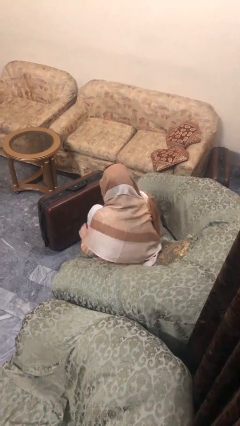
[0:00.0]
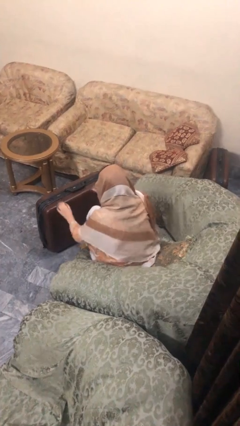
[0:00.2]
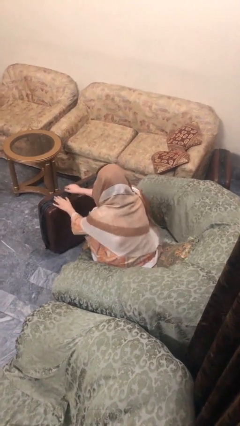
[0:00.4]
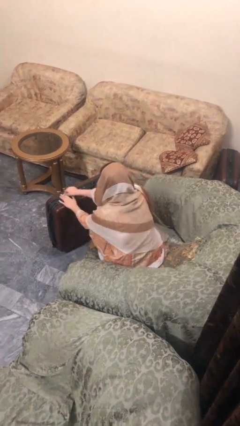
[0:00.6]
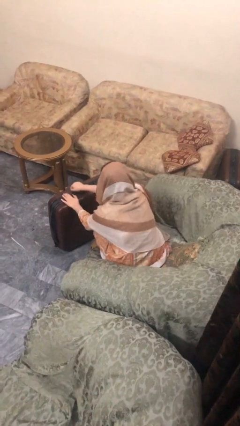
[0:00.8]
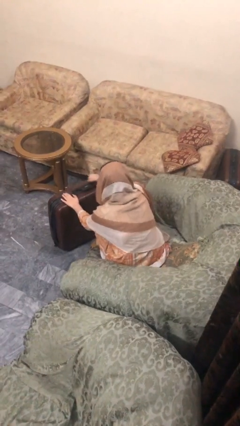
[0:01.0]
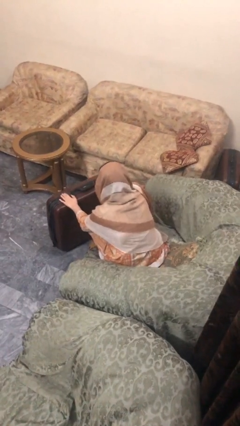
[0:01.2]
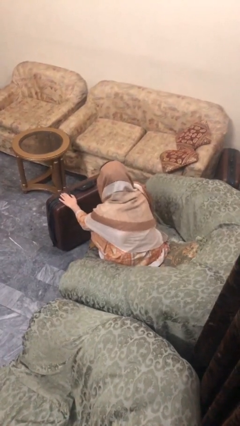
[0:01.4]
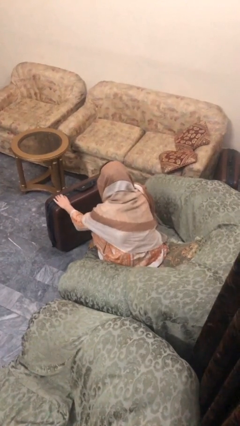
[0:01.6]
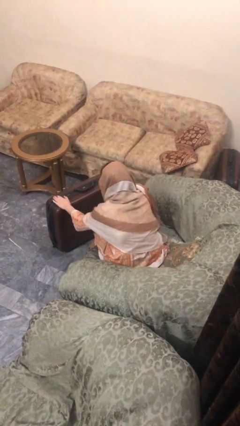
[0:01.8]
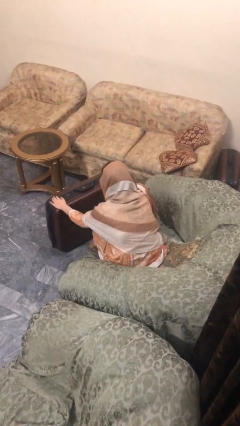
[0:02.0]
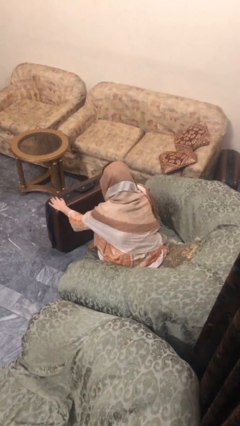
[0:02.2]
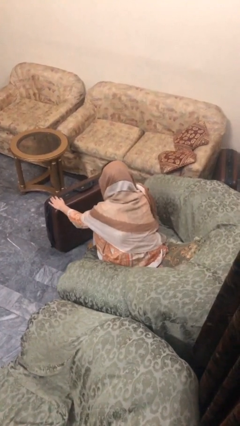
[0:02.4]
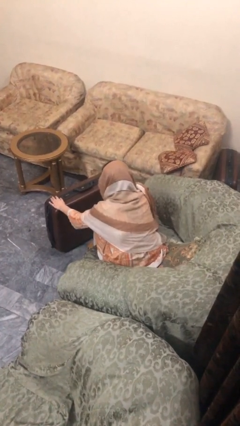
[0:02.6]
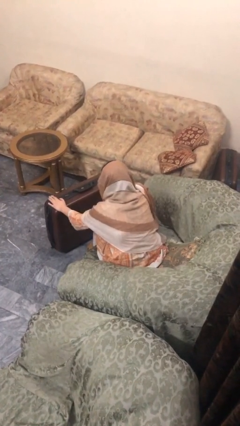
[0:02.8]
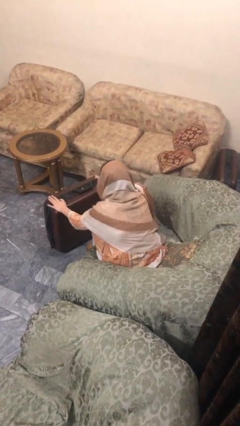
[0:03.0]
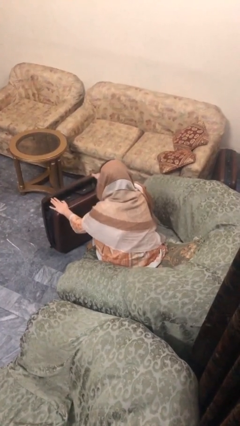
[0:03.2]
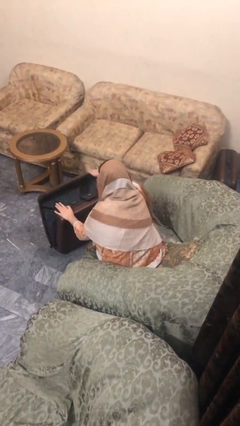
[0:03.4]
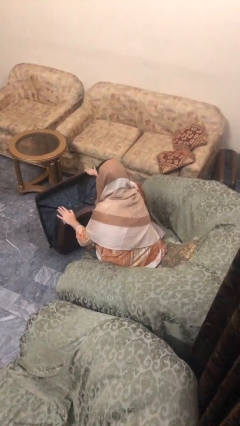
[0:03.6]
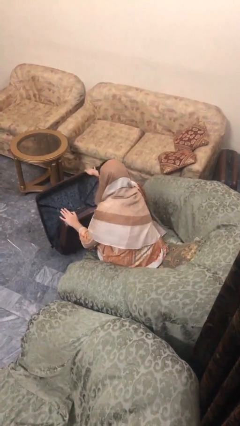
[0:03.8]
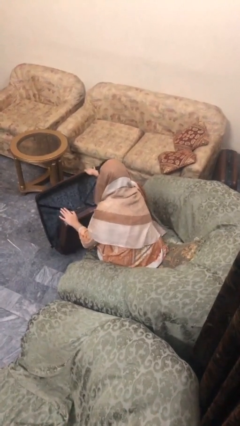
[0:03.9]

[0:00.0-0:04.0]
person opens suitcase

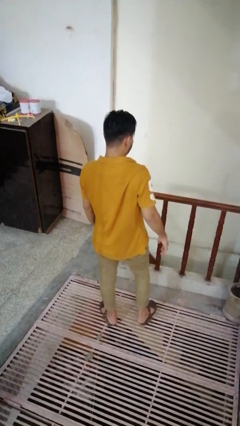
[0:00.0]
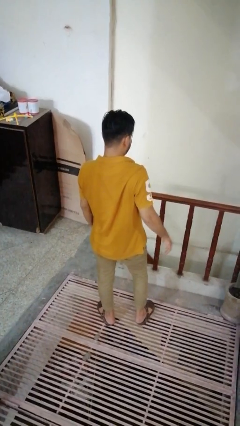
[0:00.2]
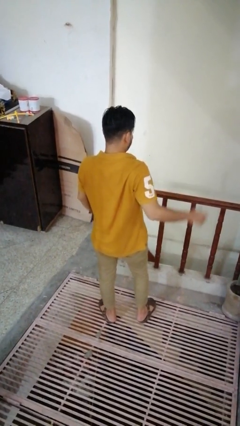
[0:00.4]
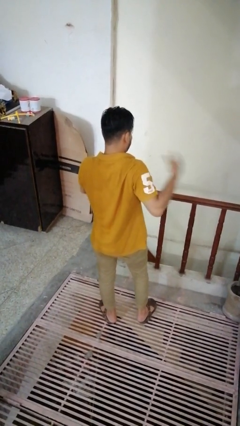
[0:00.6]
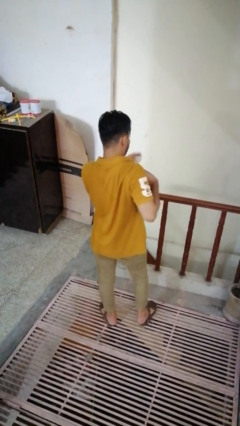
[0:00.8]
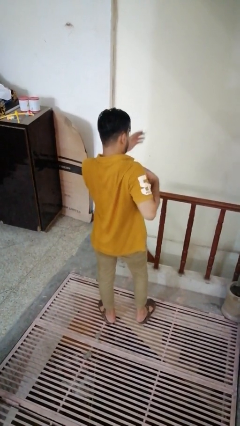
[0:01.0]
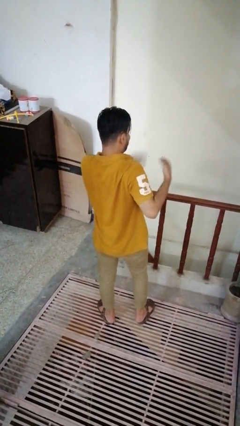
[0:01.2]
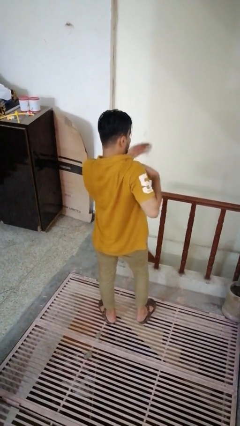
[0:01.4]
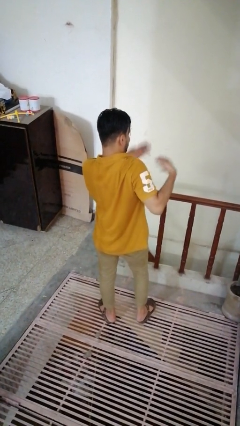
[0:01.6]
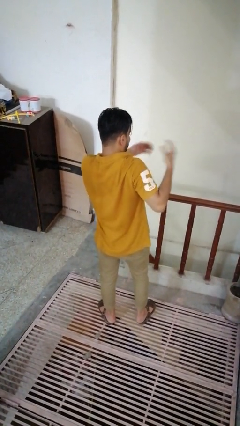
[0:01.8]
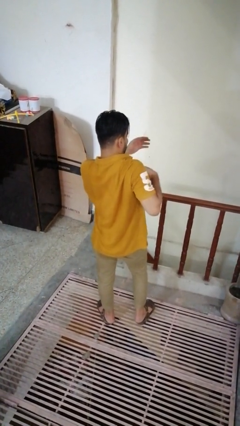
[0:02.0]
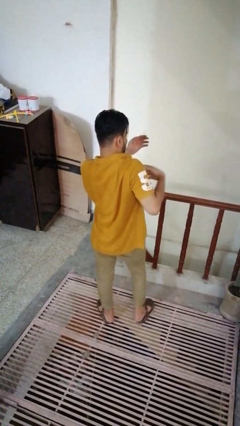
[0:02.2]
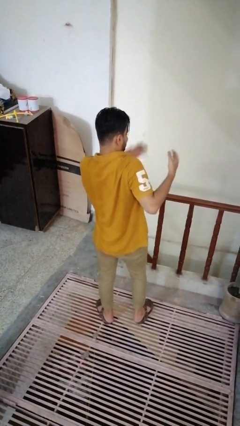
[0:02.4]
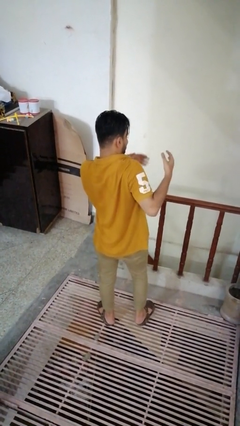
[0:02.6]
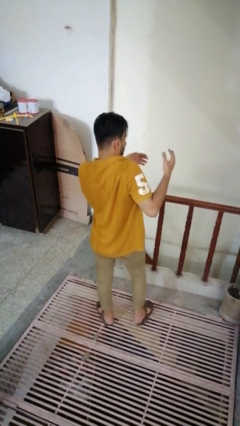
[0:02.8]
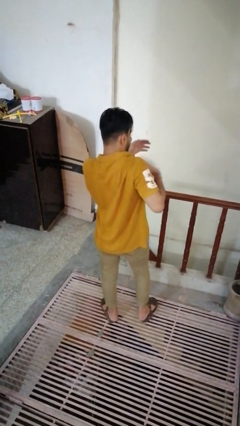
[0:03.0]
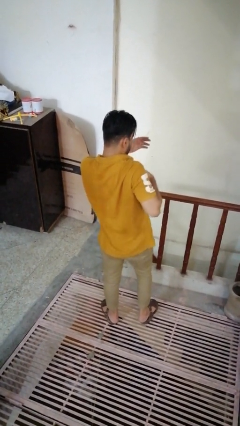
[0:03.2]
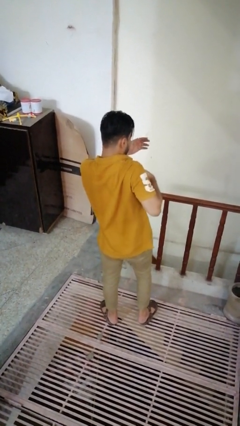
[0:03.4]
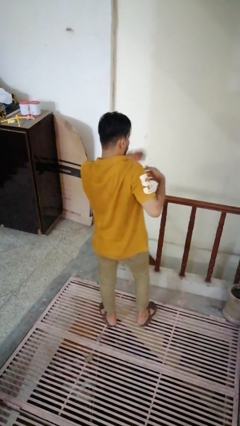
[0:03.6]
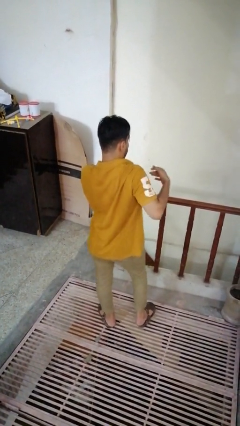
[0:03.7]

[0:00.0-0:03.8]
person drums on chest

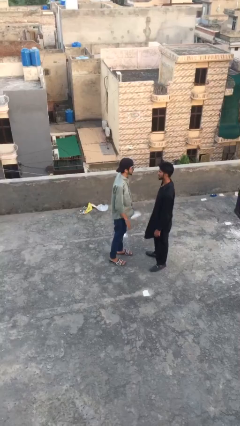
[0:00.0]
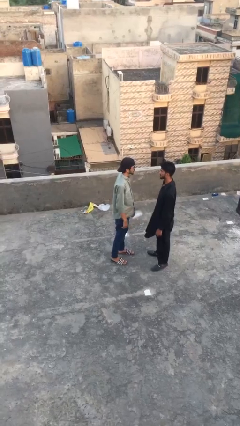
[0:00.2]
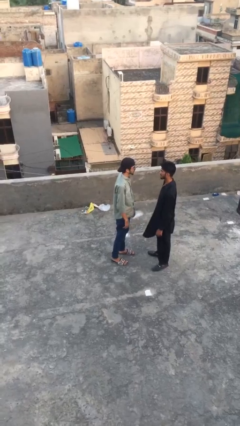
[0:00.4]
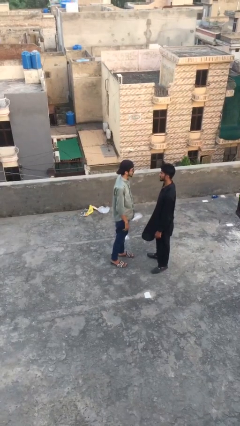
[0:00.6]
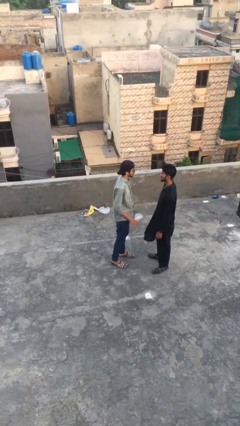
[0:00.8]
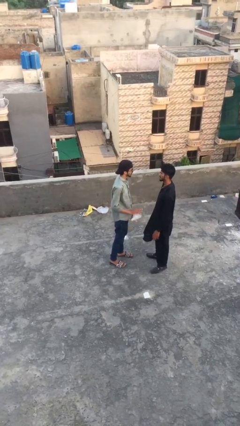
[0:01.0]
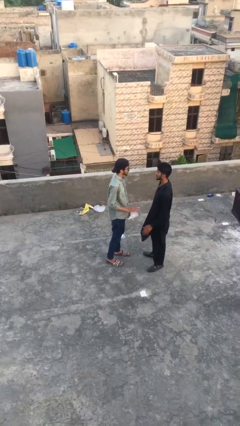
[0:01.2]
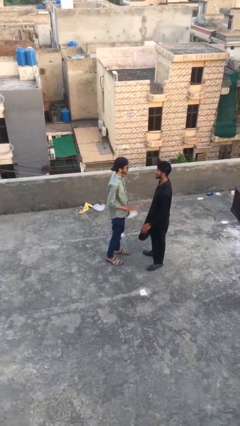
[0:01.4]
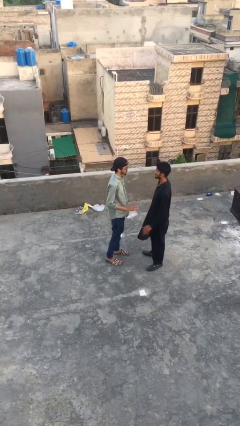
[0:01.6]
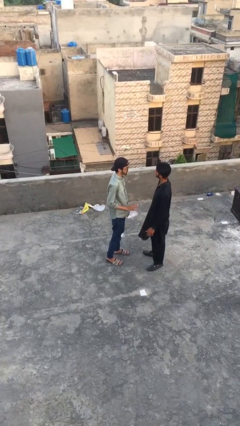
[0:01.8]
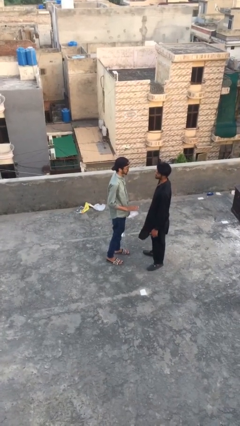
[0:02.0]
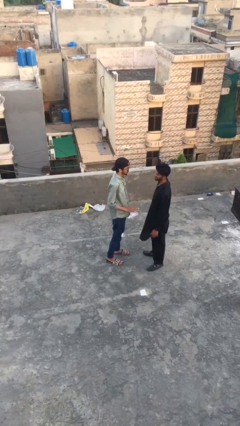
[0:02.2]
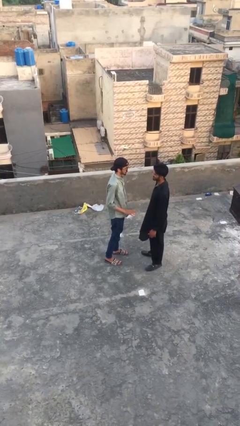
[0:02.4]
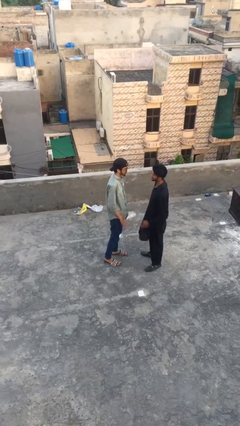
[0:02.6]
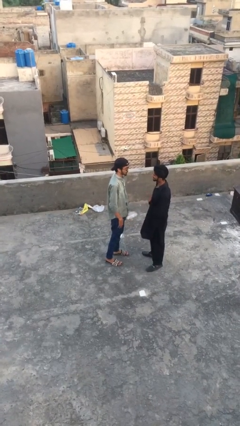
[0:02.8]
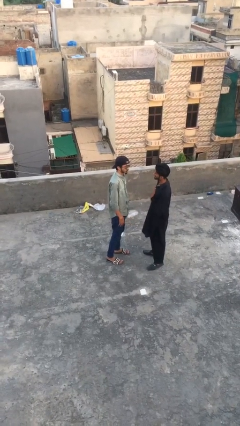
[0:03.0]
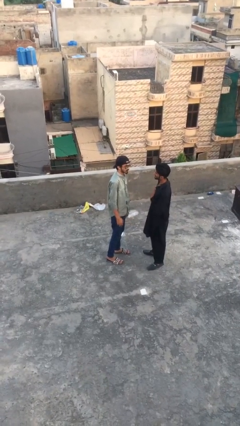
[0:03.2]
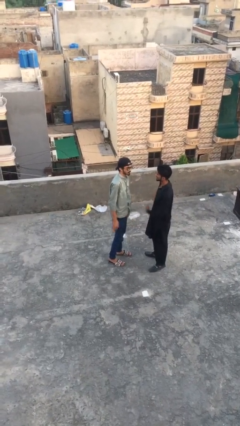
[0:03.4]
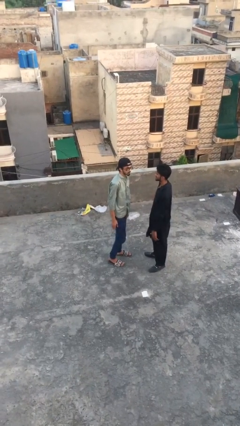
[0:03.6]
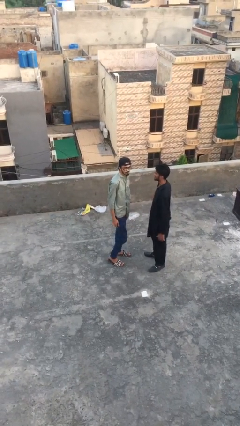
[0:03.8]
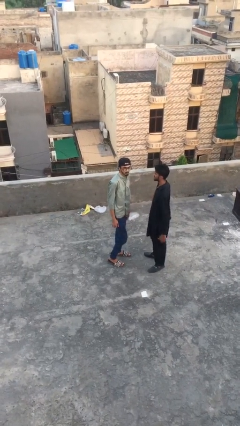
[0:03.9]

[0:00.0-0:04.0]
person talks to person

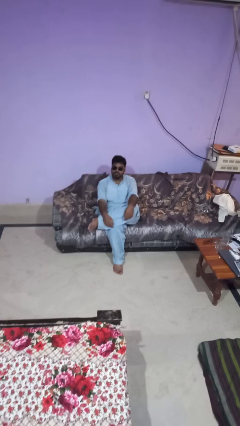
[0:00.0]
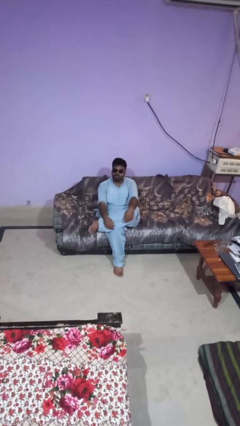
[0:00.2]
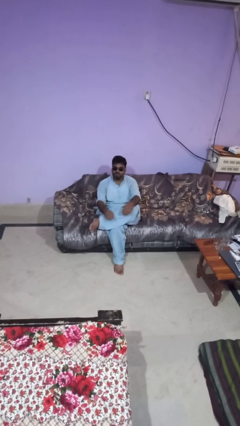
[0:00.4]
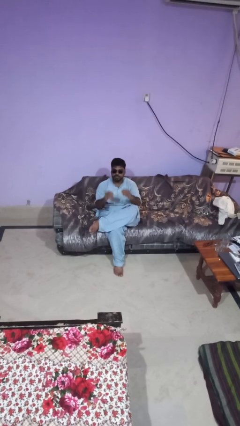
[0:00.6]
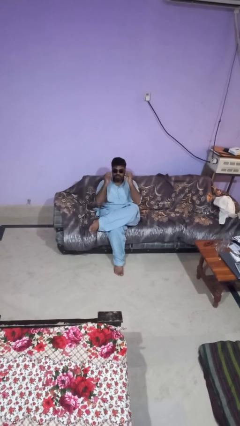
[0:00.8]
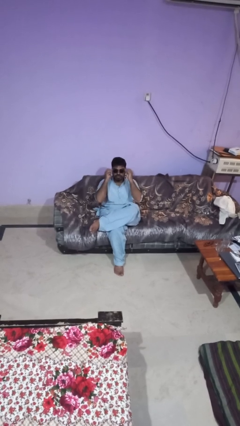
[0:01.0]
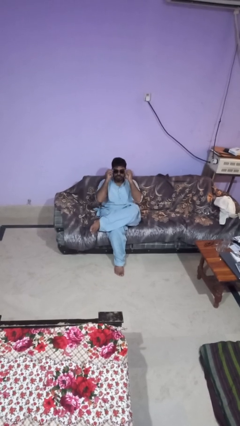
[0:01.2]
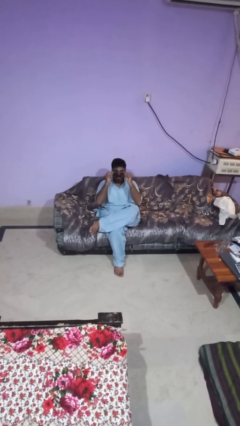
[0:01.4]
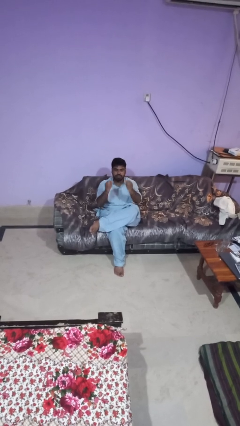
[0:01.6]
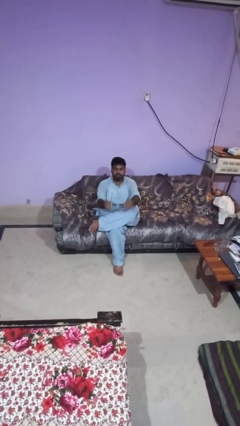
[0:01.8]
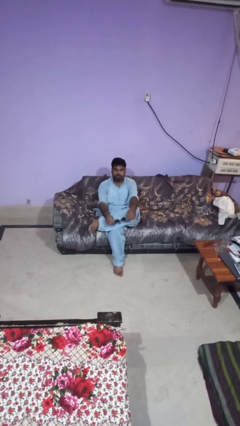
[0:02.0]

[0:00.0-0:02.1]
person takes off sunglasses

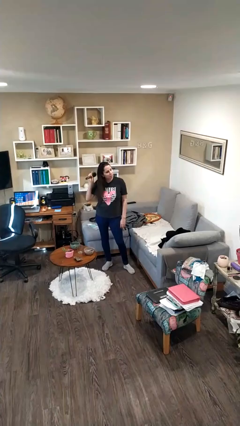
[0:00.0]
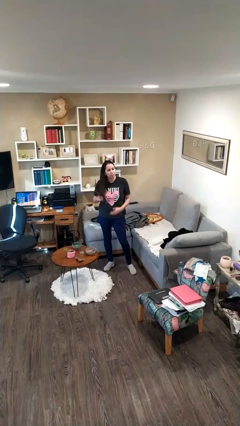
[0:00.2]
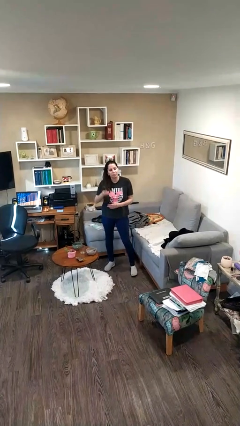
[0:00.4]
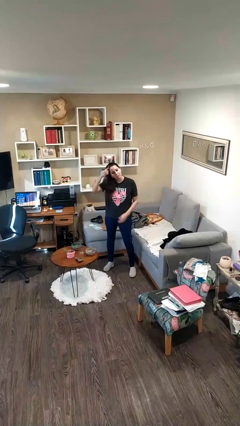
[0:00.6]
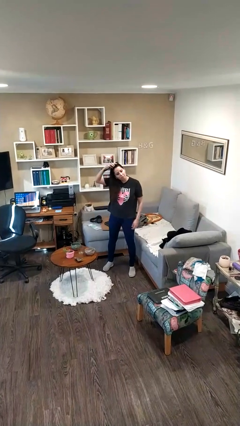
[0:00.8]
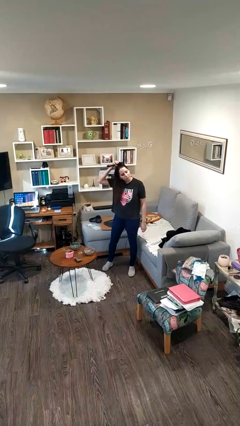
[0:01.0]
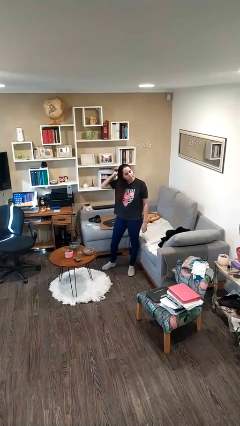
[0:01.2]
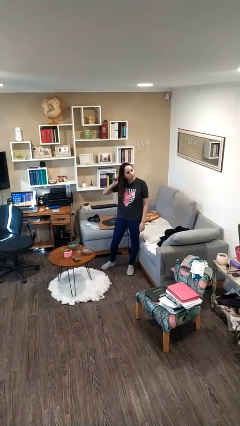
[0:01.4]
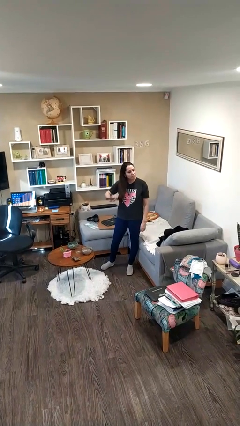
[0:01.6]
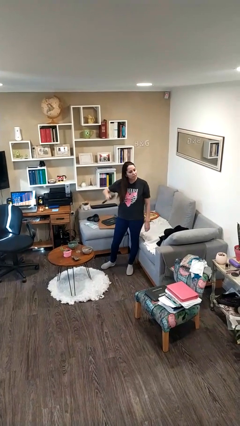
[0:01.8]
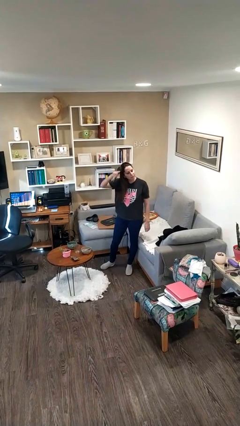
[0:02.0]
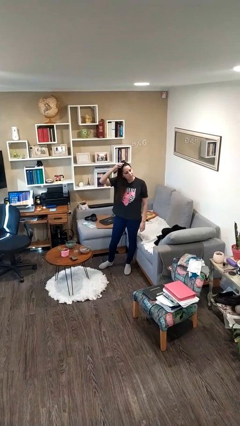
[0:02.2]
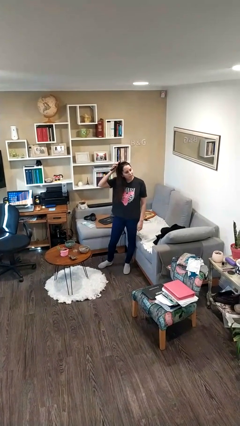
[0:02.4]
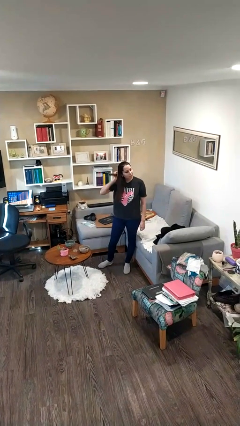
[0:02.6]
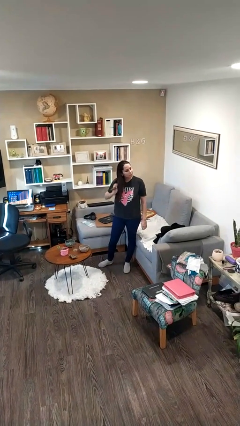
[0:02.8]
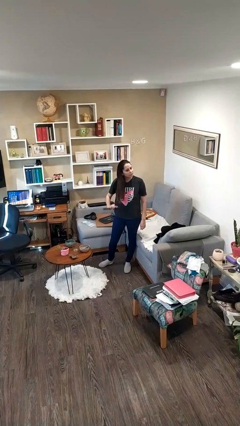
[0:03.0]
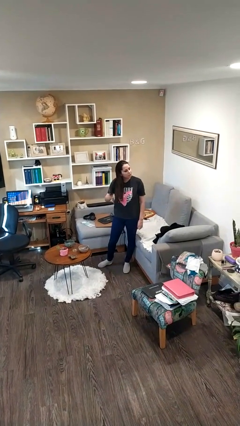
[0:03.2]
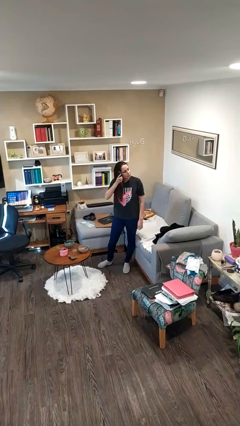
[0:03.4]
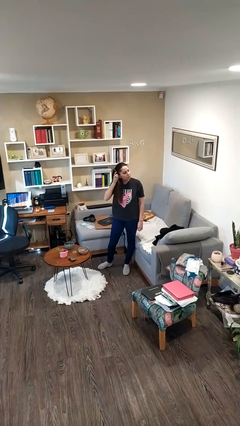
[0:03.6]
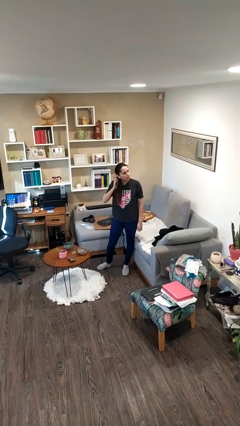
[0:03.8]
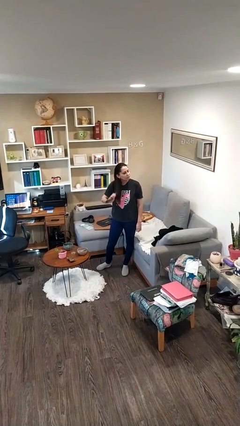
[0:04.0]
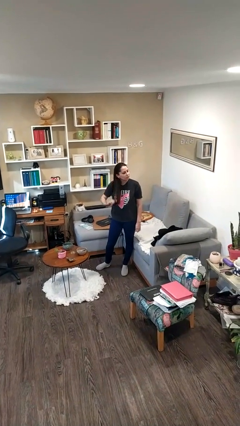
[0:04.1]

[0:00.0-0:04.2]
person brushes hair
